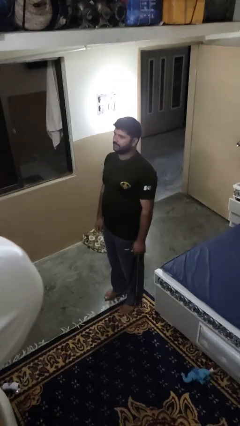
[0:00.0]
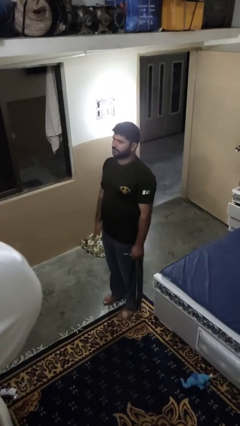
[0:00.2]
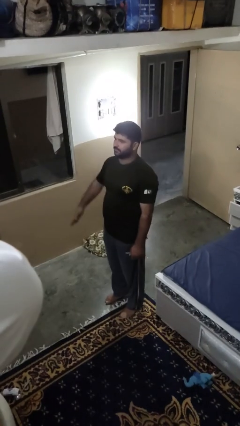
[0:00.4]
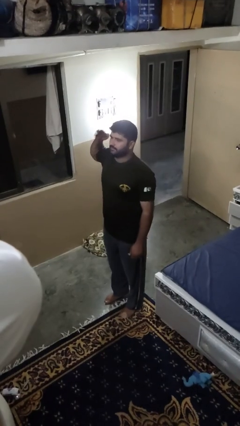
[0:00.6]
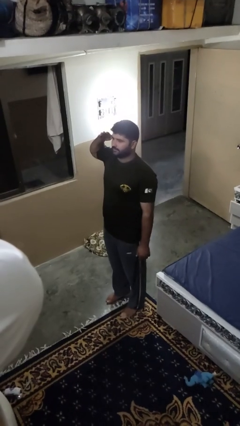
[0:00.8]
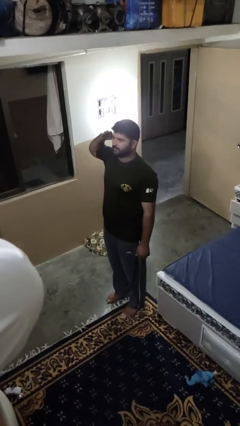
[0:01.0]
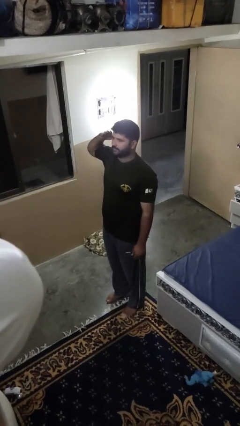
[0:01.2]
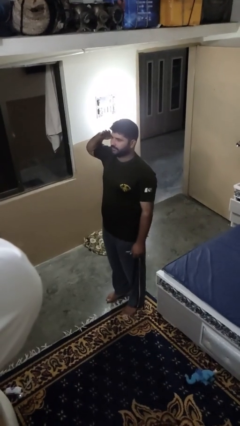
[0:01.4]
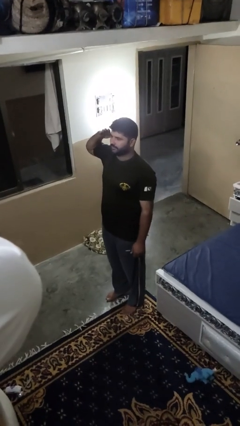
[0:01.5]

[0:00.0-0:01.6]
person salutes

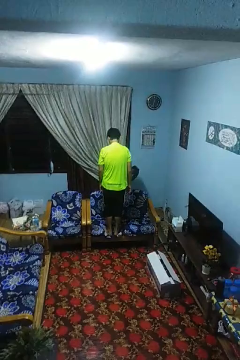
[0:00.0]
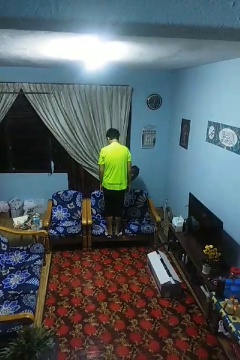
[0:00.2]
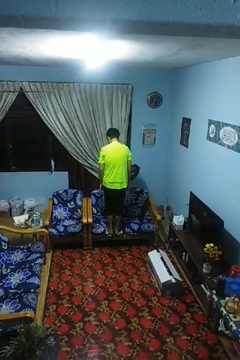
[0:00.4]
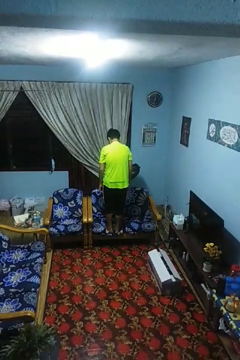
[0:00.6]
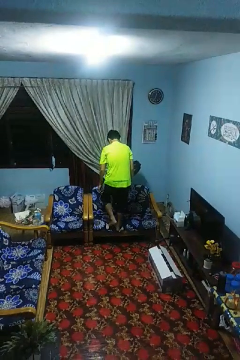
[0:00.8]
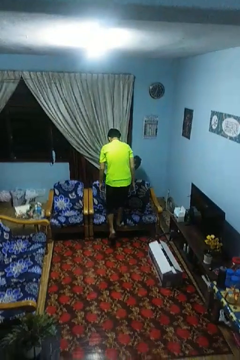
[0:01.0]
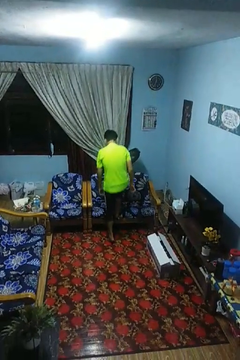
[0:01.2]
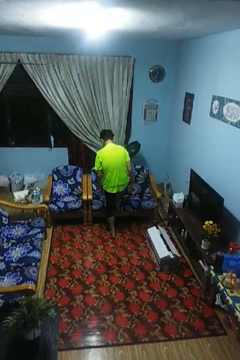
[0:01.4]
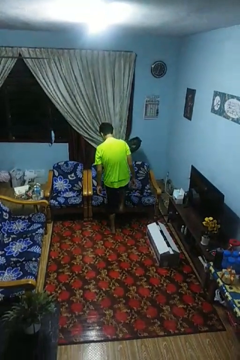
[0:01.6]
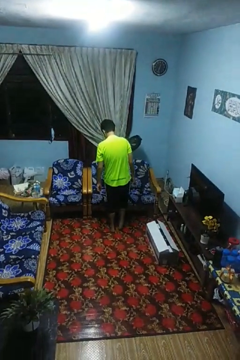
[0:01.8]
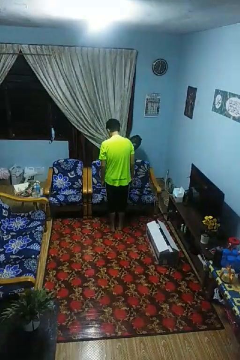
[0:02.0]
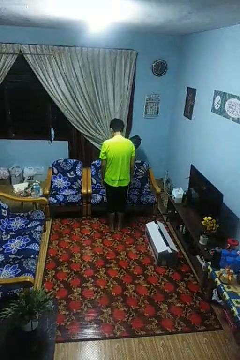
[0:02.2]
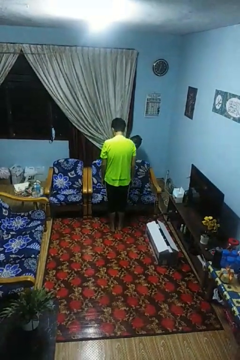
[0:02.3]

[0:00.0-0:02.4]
person climbs off couch

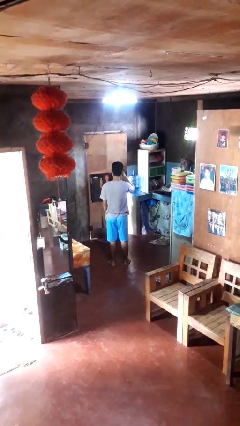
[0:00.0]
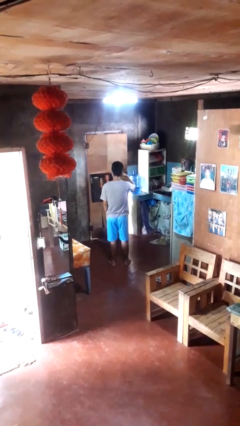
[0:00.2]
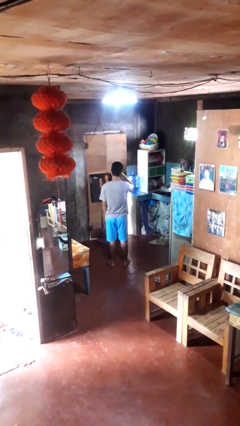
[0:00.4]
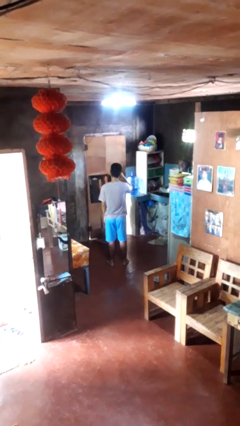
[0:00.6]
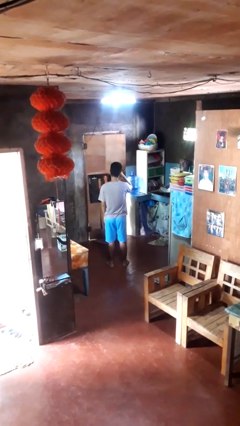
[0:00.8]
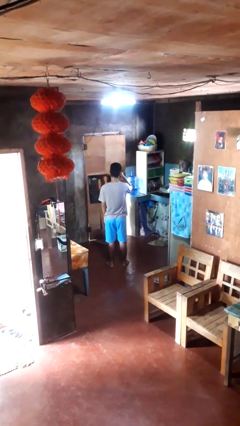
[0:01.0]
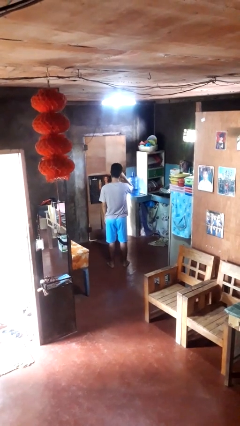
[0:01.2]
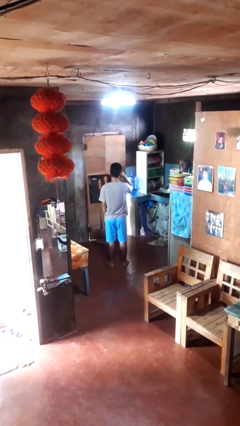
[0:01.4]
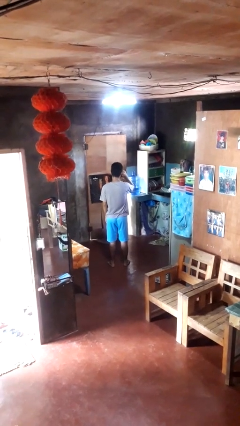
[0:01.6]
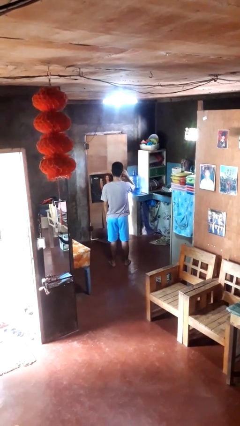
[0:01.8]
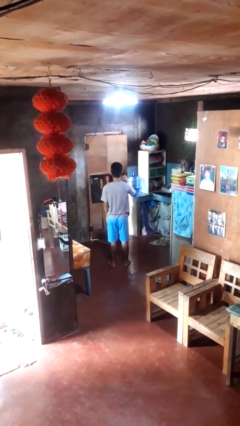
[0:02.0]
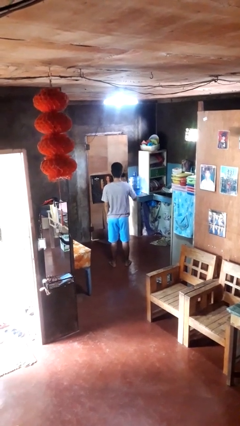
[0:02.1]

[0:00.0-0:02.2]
person rubs eyes

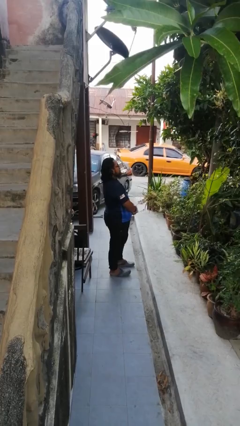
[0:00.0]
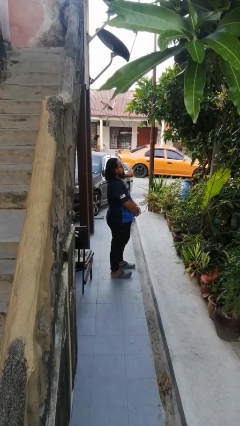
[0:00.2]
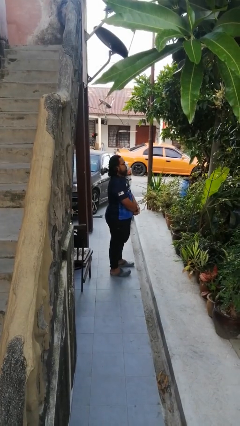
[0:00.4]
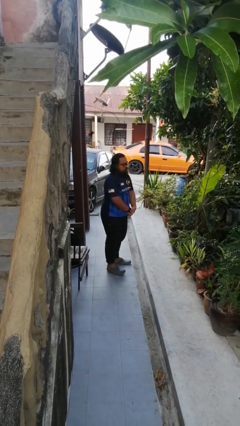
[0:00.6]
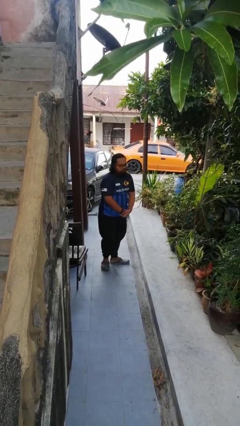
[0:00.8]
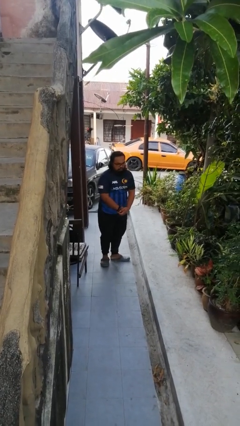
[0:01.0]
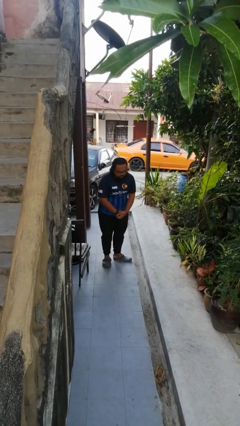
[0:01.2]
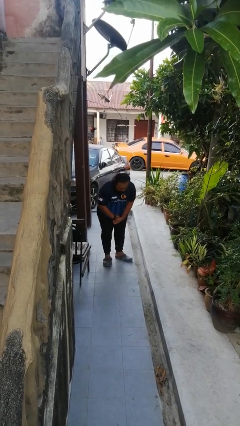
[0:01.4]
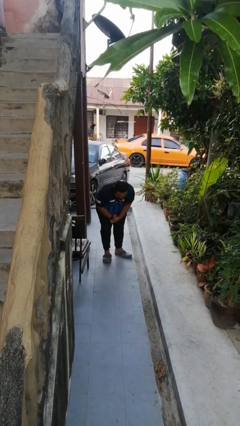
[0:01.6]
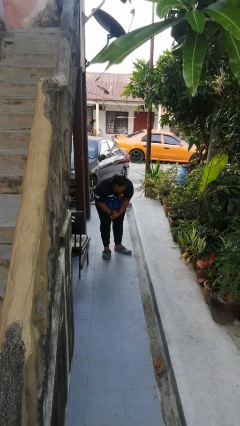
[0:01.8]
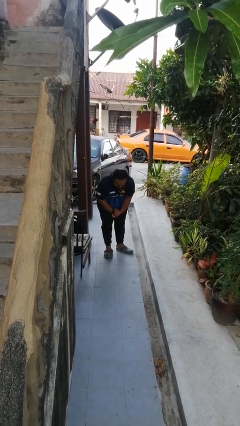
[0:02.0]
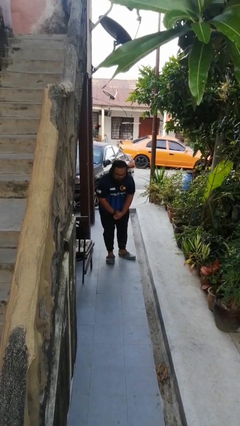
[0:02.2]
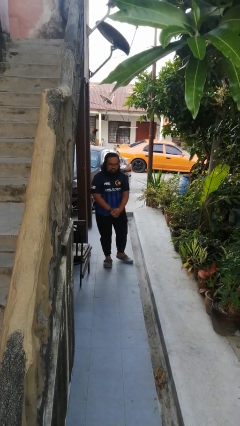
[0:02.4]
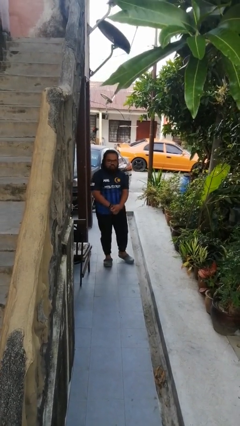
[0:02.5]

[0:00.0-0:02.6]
person bows

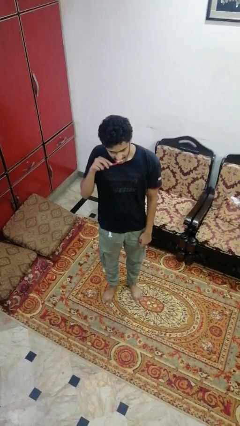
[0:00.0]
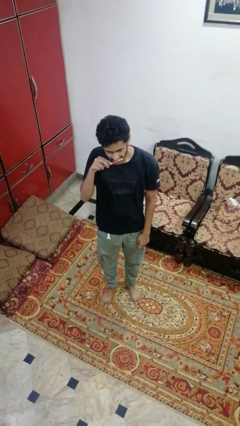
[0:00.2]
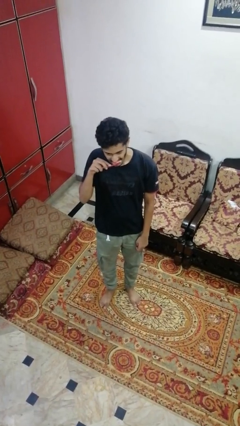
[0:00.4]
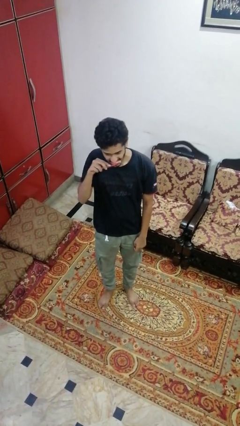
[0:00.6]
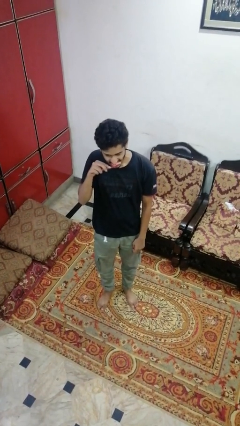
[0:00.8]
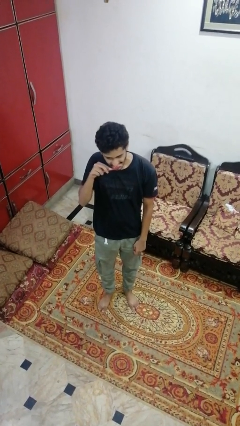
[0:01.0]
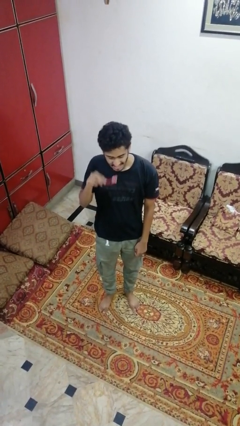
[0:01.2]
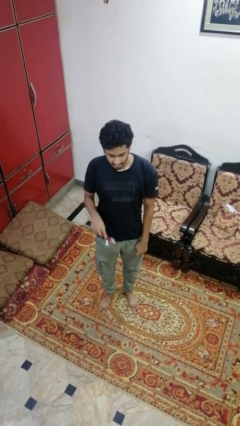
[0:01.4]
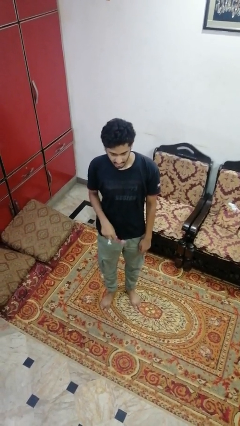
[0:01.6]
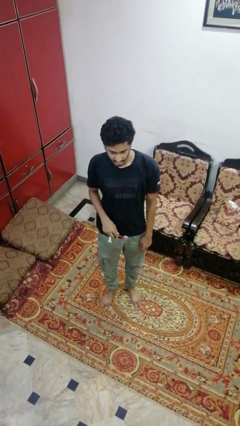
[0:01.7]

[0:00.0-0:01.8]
person brushes teeth

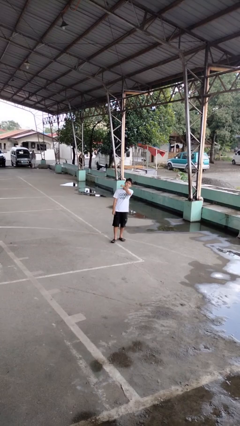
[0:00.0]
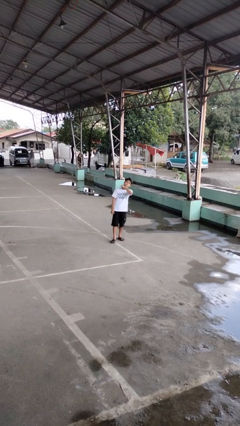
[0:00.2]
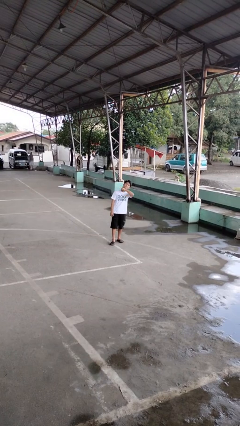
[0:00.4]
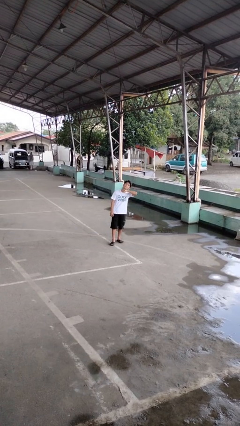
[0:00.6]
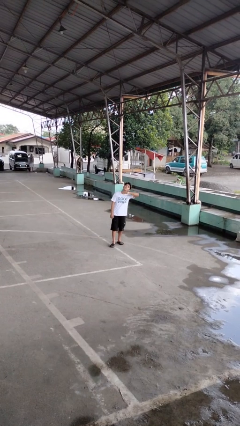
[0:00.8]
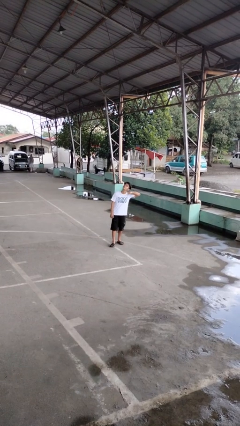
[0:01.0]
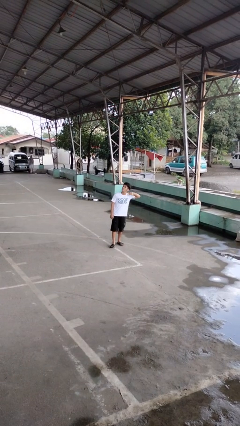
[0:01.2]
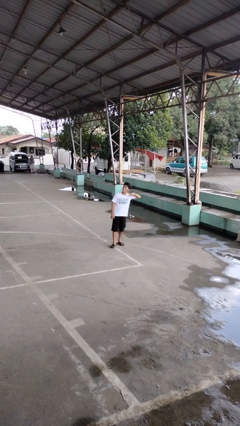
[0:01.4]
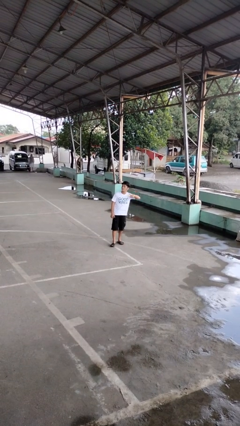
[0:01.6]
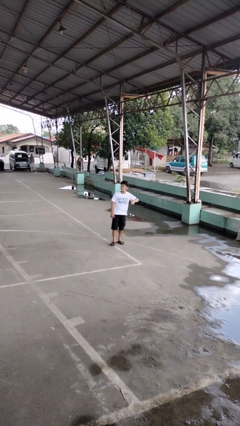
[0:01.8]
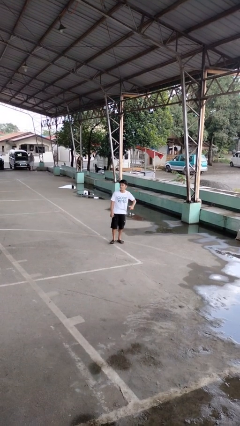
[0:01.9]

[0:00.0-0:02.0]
person gestures cut

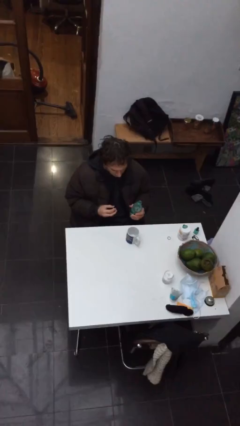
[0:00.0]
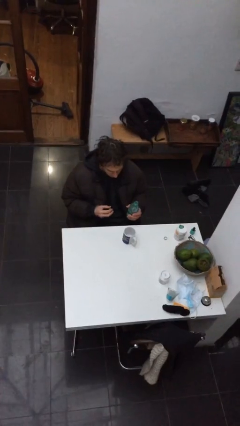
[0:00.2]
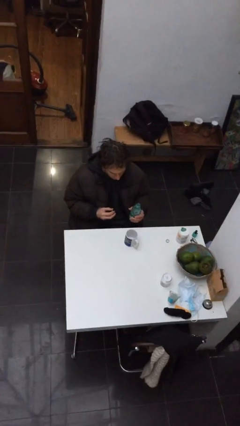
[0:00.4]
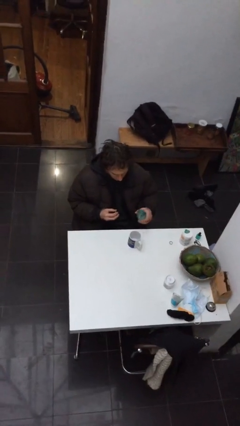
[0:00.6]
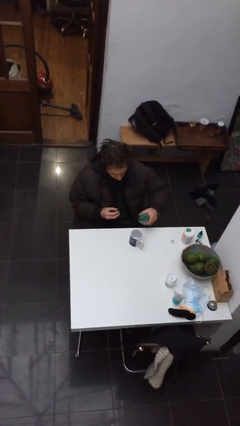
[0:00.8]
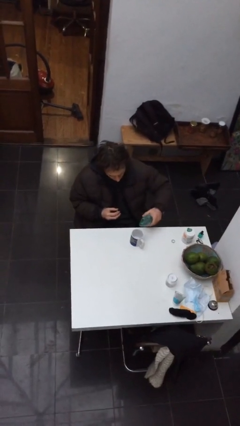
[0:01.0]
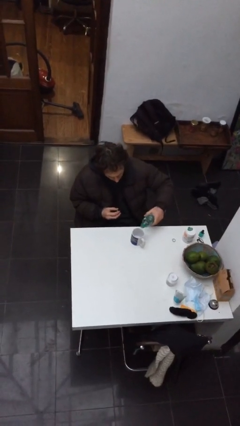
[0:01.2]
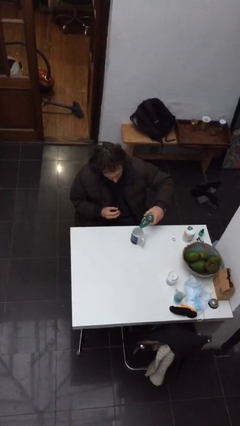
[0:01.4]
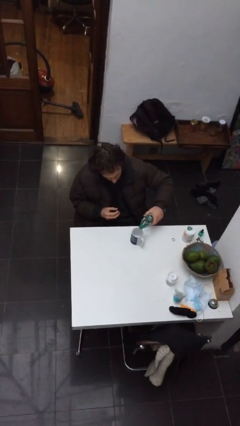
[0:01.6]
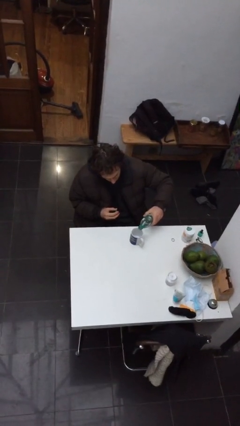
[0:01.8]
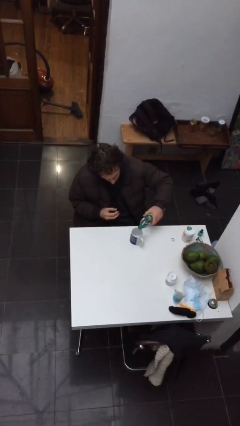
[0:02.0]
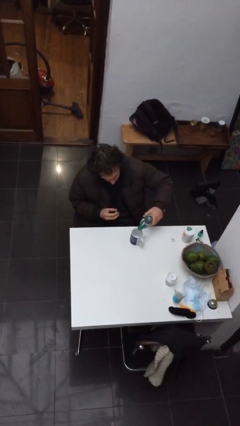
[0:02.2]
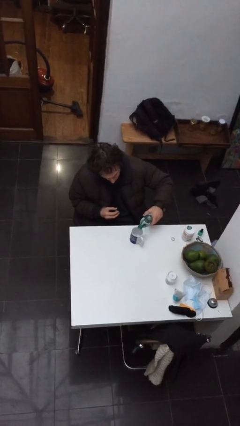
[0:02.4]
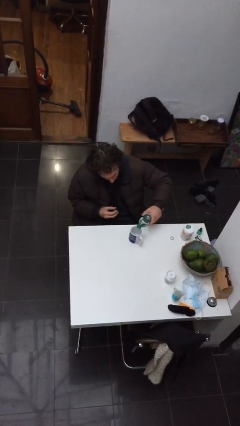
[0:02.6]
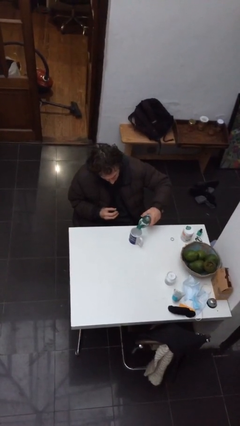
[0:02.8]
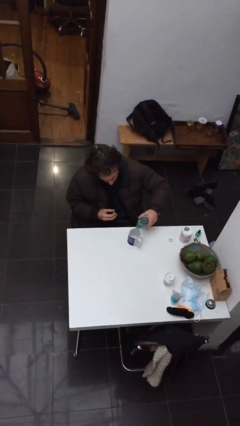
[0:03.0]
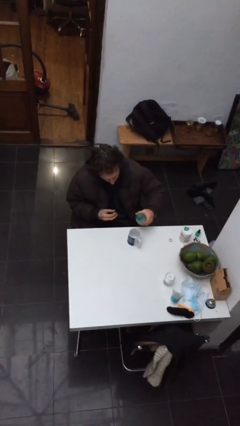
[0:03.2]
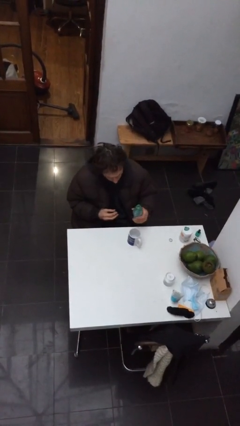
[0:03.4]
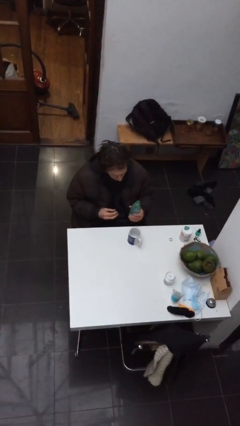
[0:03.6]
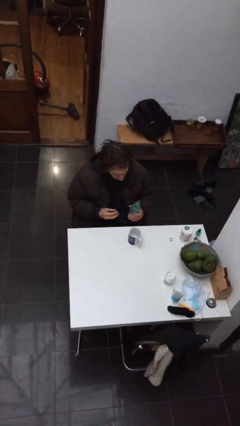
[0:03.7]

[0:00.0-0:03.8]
person pours liquid into cup

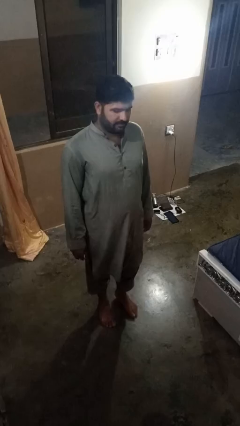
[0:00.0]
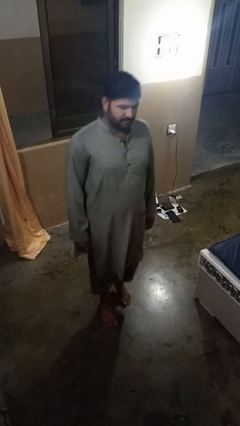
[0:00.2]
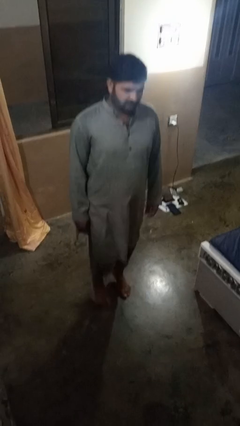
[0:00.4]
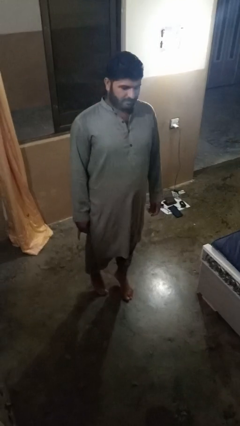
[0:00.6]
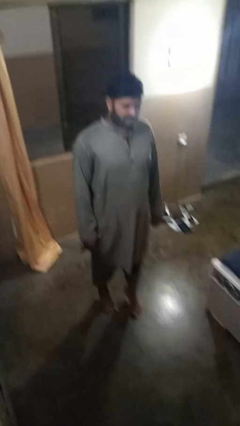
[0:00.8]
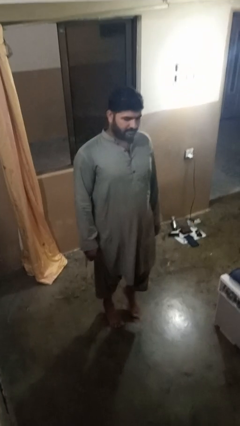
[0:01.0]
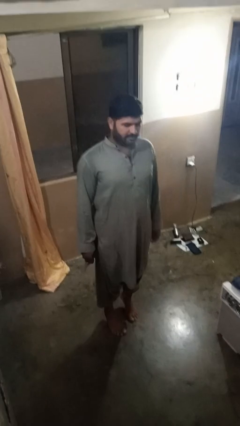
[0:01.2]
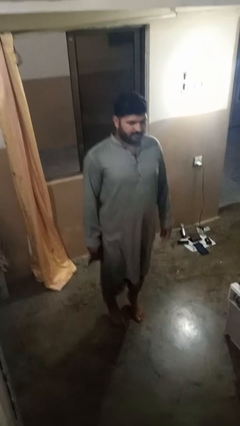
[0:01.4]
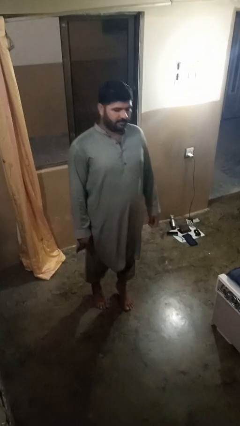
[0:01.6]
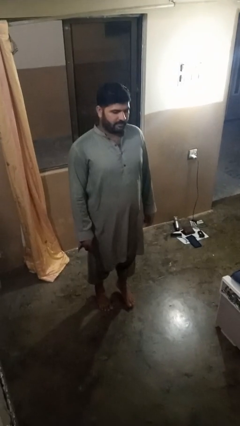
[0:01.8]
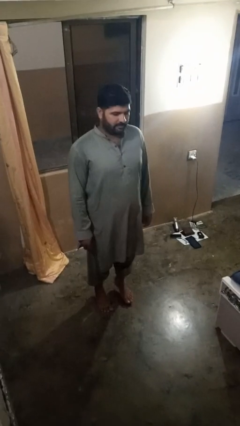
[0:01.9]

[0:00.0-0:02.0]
person walks tiptoe
